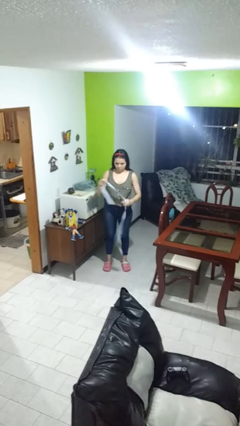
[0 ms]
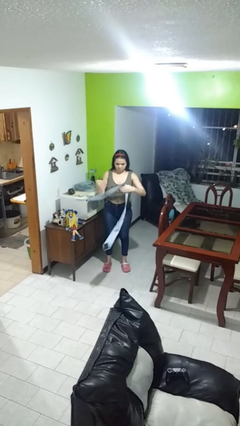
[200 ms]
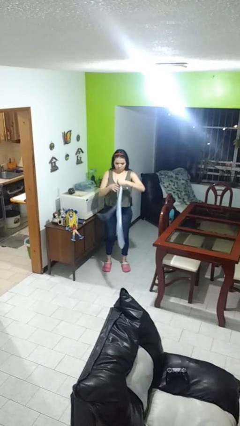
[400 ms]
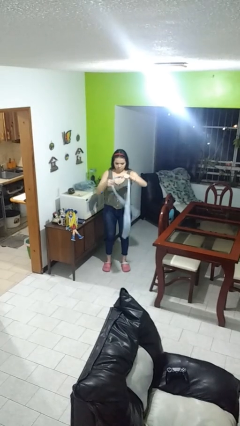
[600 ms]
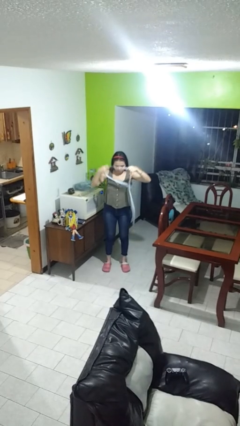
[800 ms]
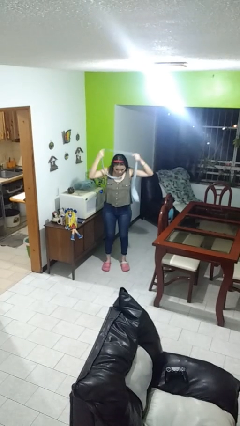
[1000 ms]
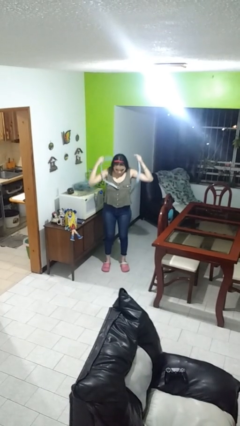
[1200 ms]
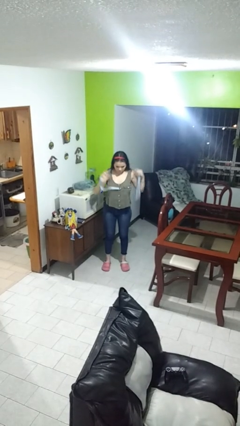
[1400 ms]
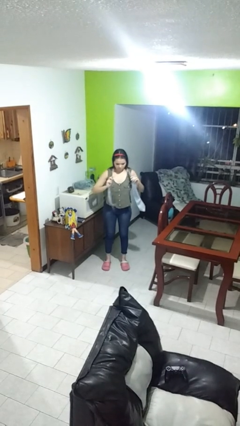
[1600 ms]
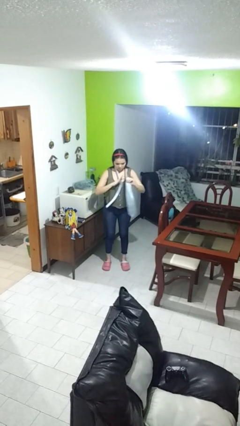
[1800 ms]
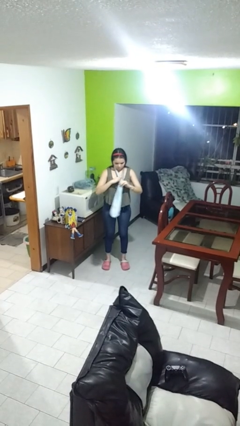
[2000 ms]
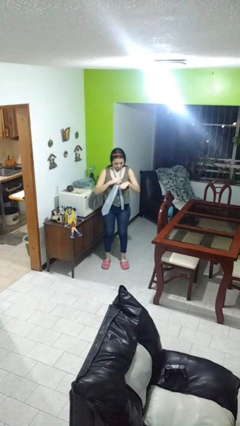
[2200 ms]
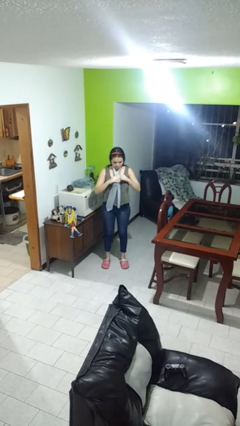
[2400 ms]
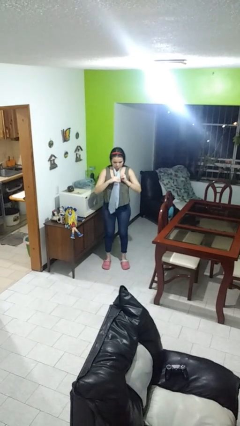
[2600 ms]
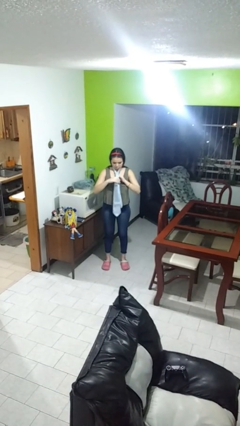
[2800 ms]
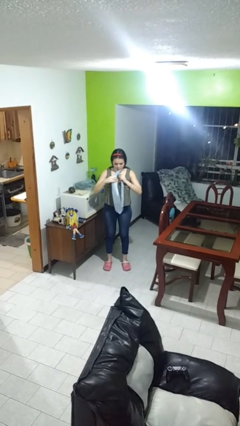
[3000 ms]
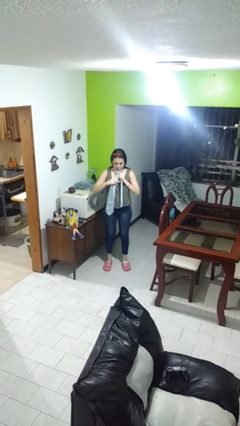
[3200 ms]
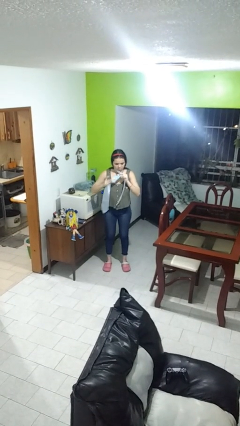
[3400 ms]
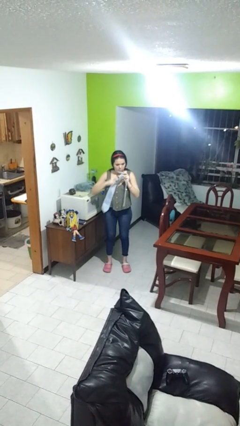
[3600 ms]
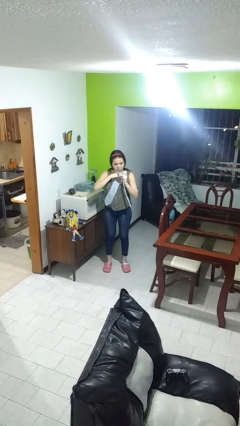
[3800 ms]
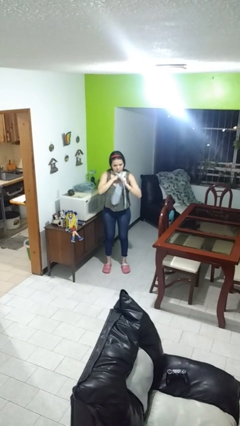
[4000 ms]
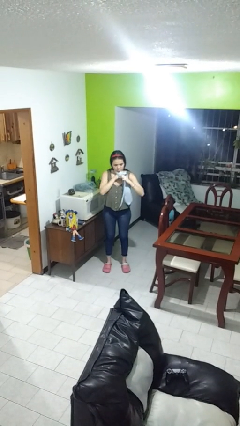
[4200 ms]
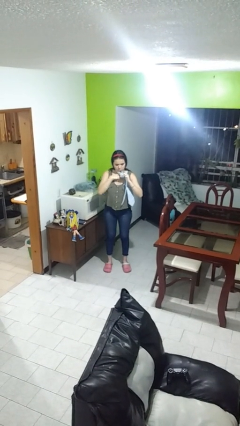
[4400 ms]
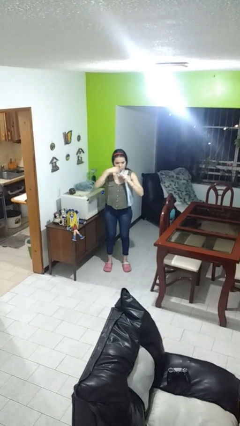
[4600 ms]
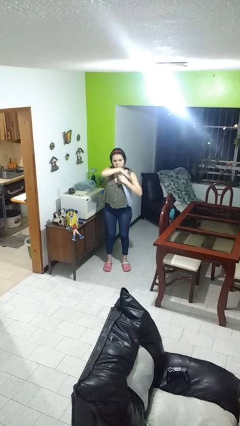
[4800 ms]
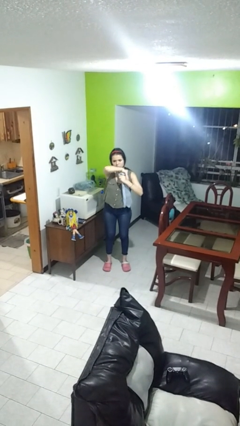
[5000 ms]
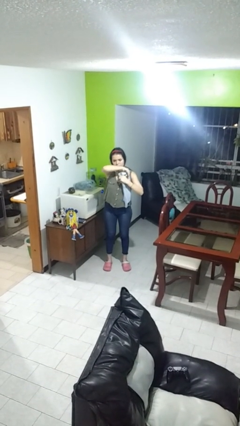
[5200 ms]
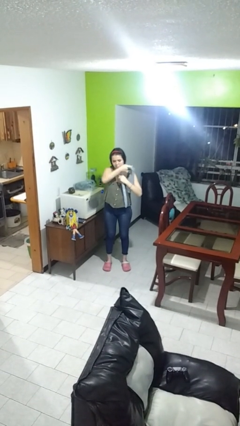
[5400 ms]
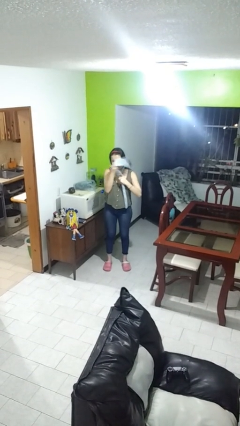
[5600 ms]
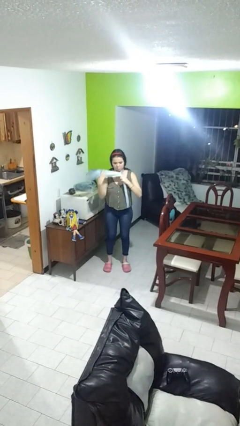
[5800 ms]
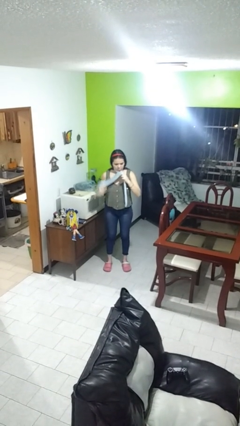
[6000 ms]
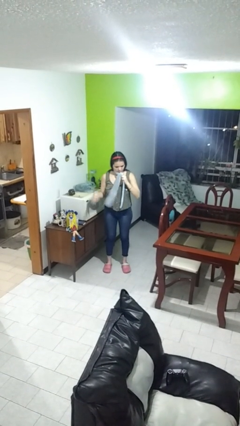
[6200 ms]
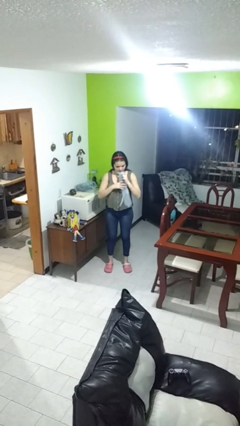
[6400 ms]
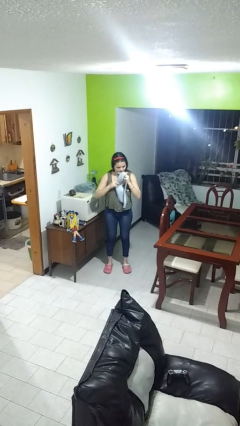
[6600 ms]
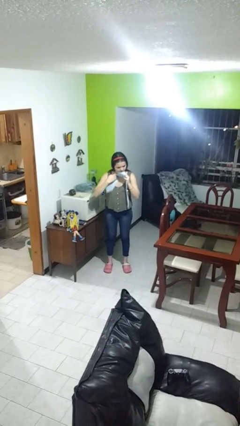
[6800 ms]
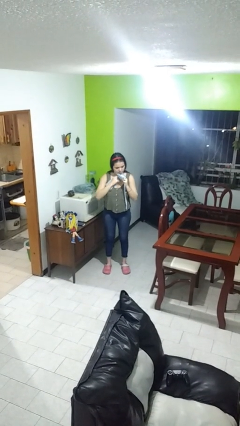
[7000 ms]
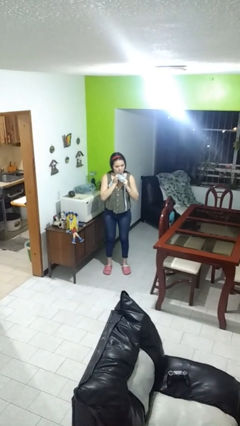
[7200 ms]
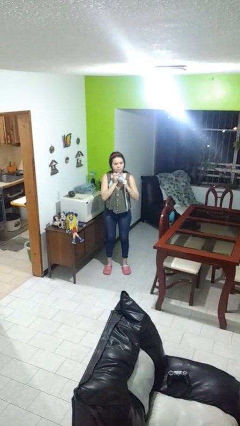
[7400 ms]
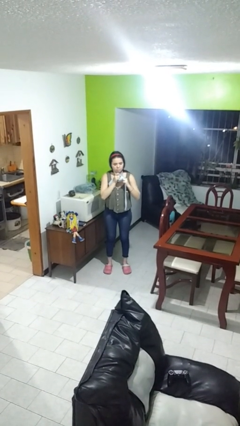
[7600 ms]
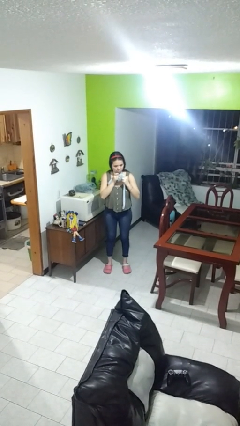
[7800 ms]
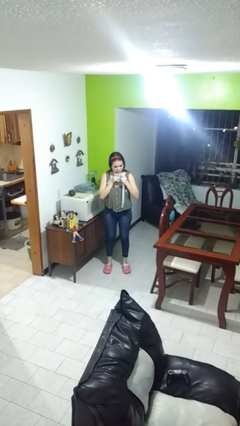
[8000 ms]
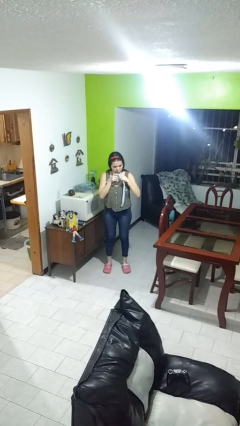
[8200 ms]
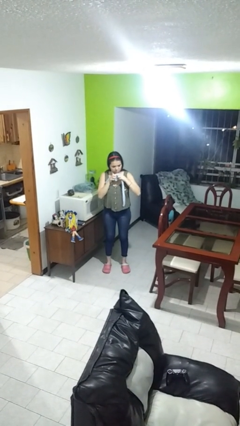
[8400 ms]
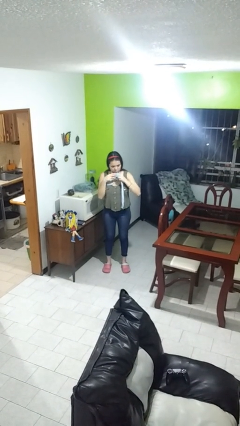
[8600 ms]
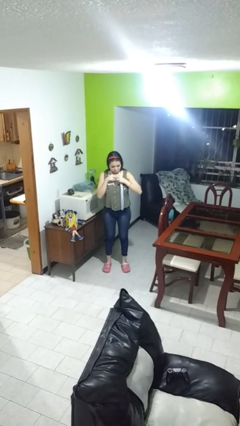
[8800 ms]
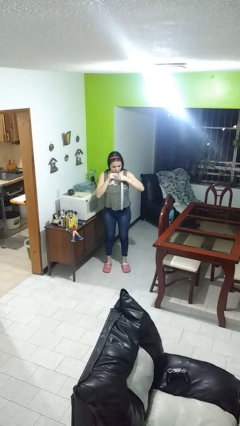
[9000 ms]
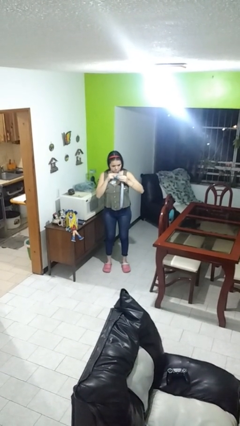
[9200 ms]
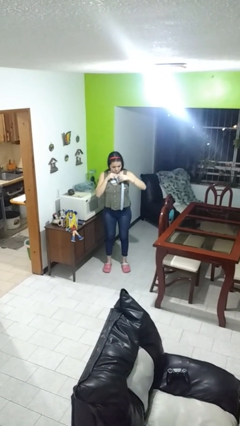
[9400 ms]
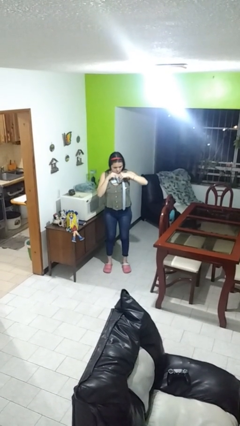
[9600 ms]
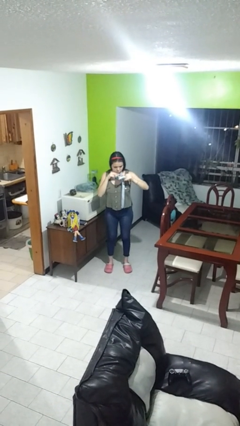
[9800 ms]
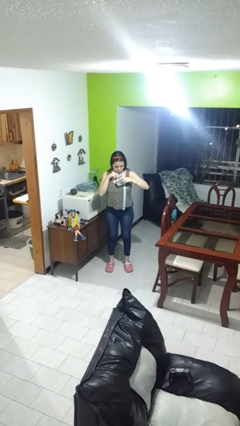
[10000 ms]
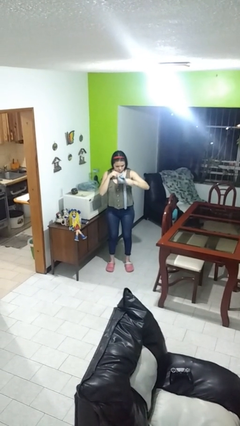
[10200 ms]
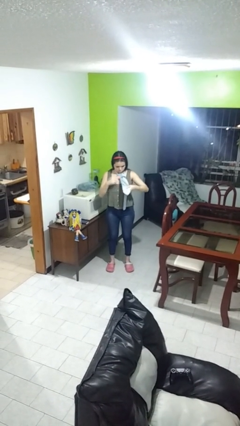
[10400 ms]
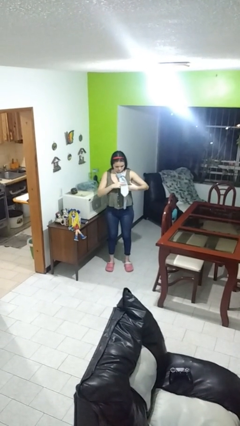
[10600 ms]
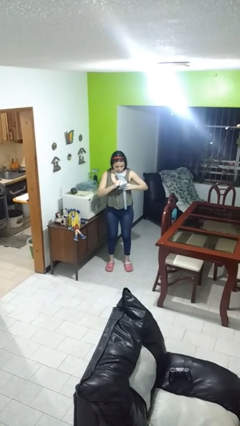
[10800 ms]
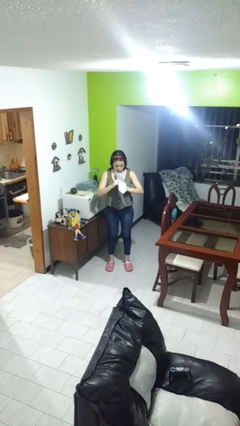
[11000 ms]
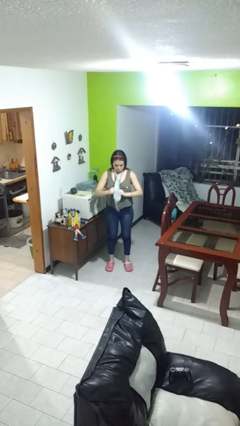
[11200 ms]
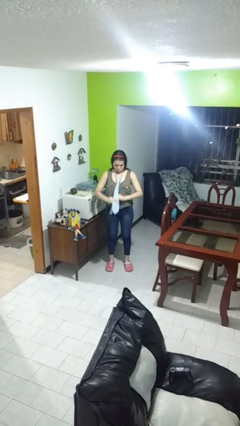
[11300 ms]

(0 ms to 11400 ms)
person puts on necktie

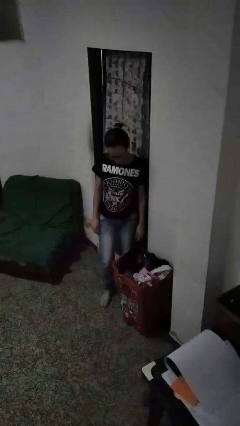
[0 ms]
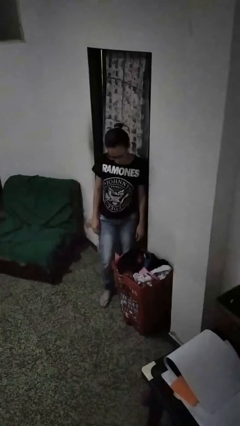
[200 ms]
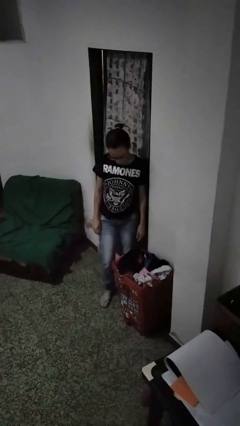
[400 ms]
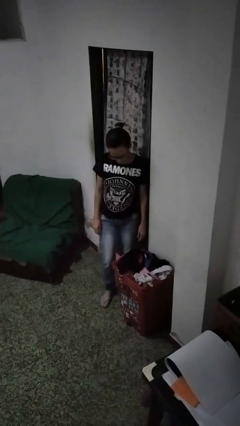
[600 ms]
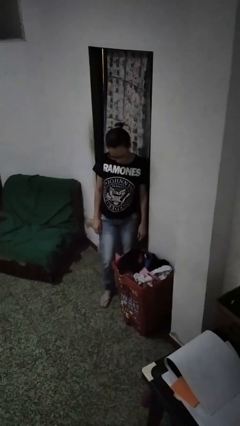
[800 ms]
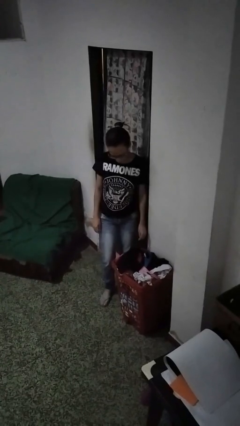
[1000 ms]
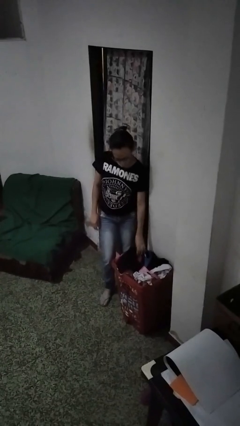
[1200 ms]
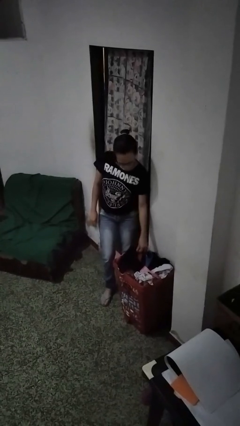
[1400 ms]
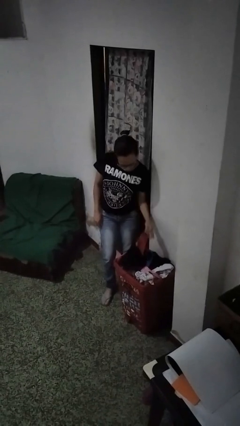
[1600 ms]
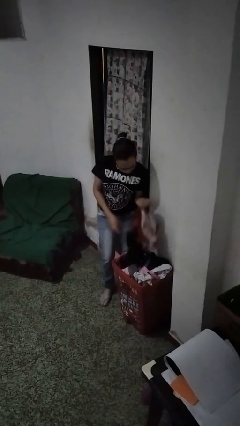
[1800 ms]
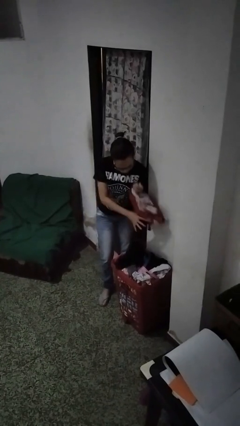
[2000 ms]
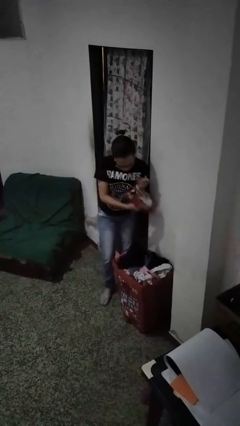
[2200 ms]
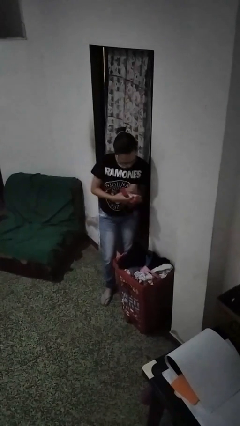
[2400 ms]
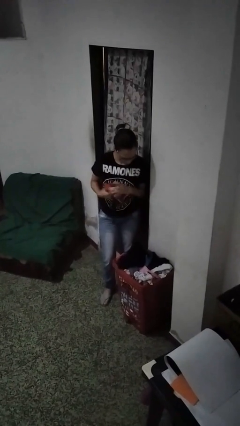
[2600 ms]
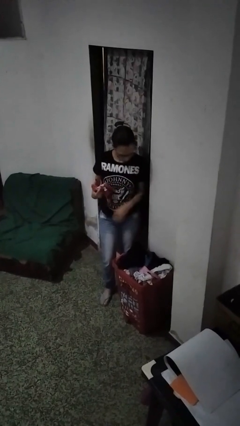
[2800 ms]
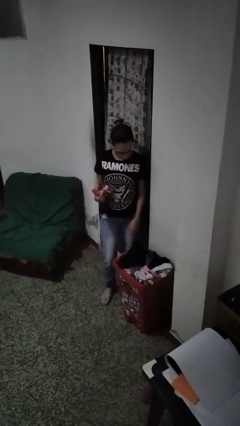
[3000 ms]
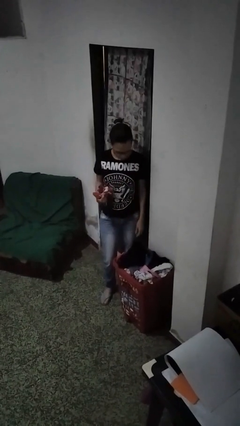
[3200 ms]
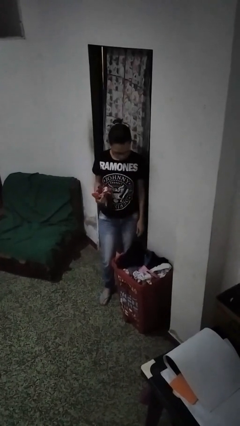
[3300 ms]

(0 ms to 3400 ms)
person takes object from basket

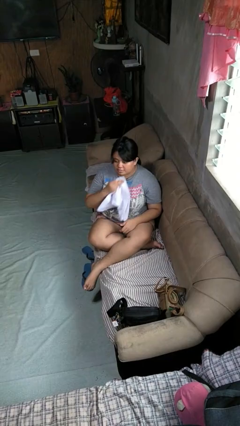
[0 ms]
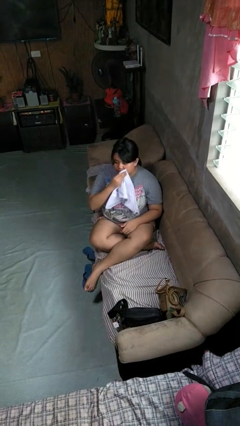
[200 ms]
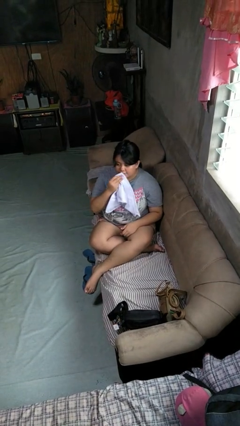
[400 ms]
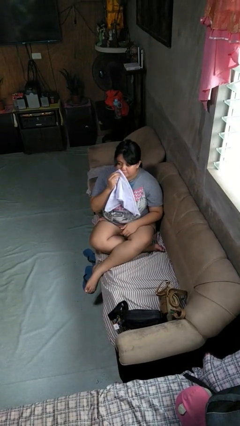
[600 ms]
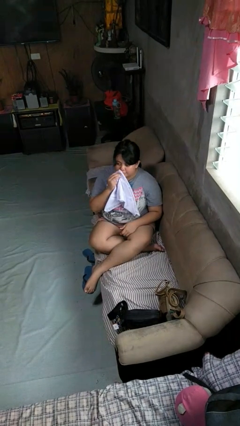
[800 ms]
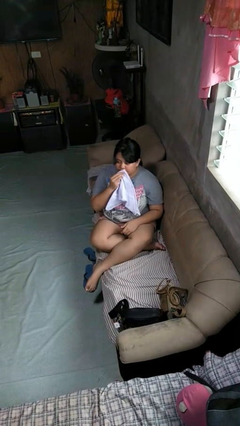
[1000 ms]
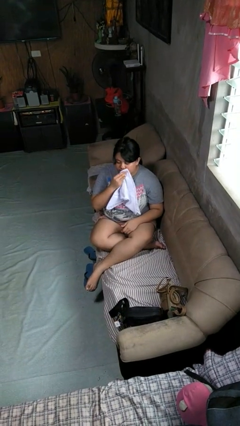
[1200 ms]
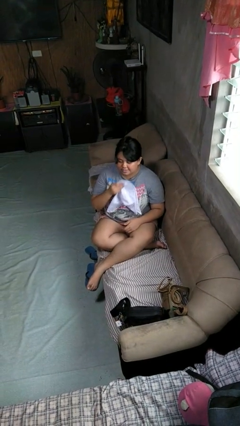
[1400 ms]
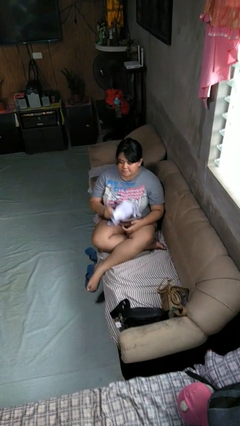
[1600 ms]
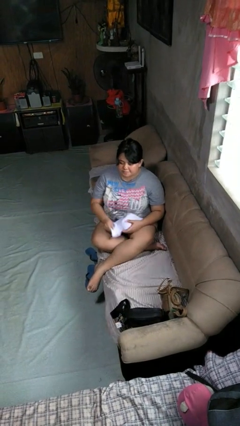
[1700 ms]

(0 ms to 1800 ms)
person wipes mouth with napkin

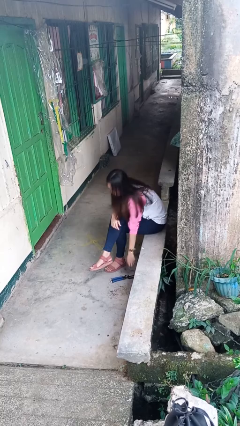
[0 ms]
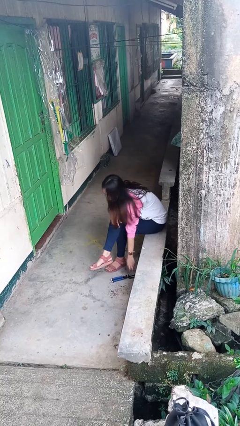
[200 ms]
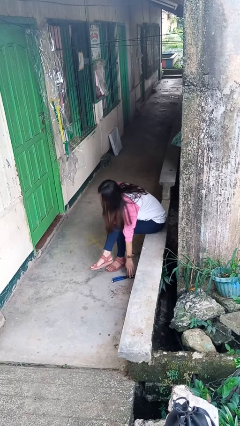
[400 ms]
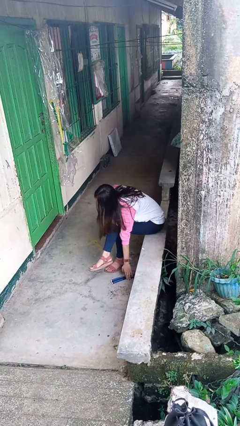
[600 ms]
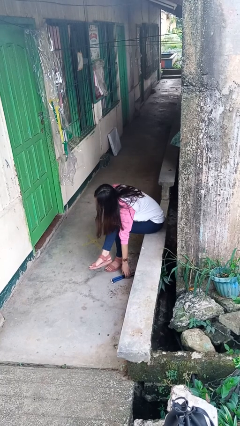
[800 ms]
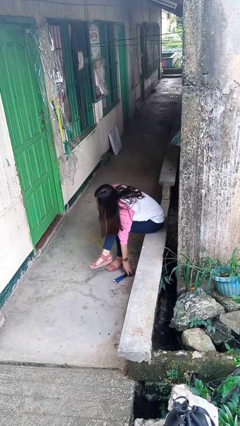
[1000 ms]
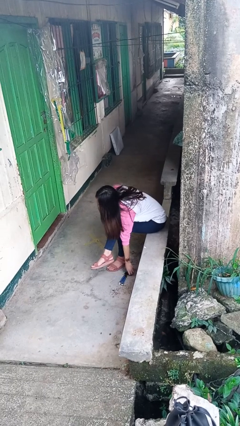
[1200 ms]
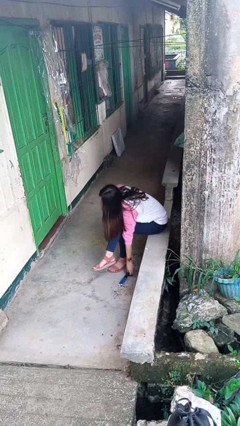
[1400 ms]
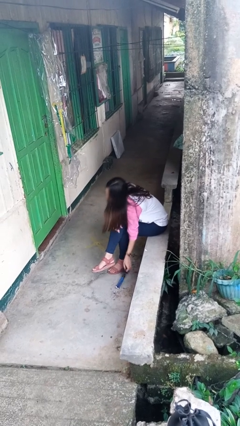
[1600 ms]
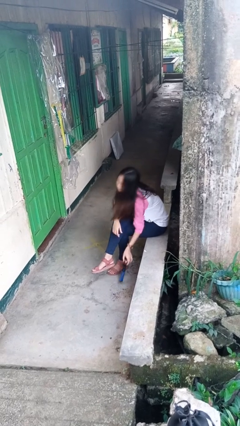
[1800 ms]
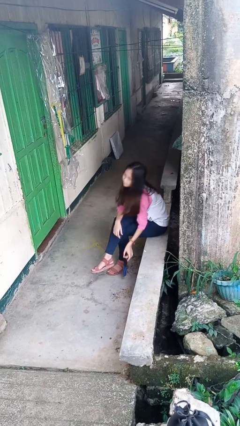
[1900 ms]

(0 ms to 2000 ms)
person picks up object from floor
